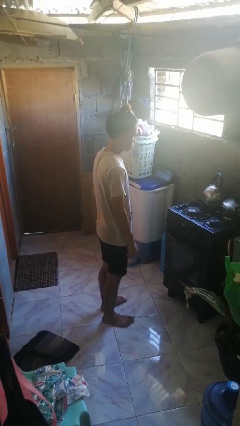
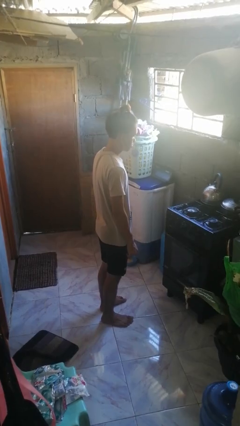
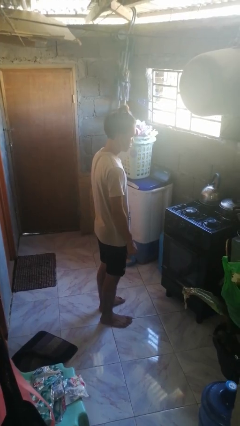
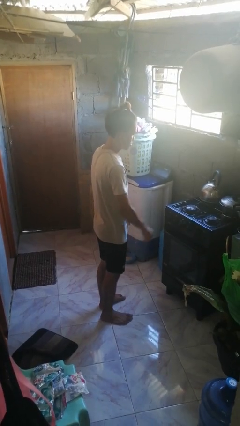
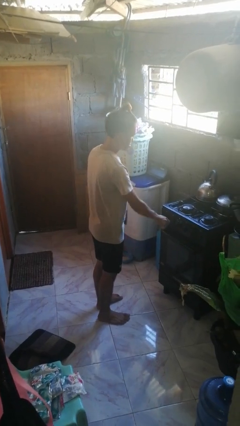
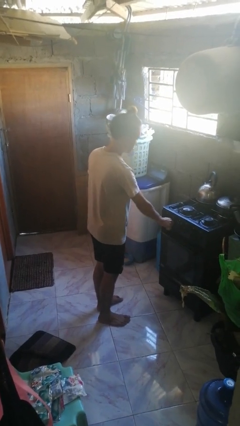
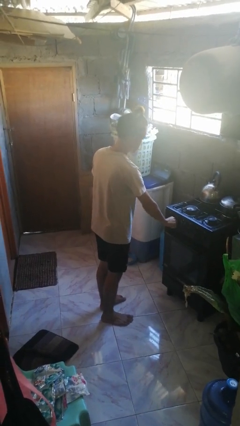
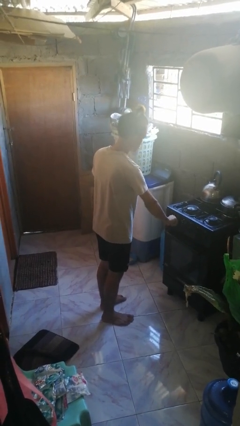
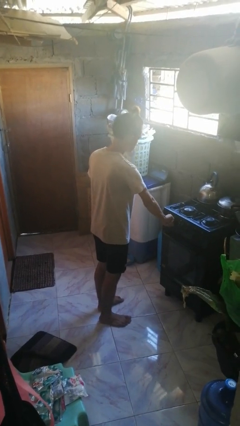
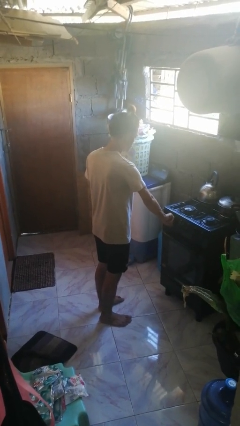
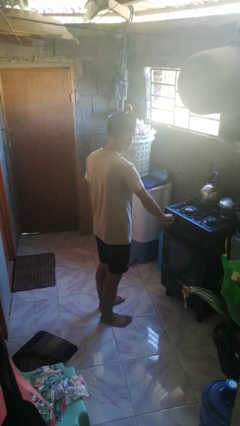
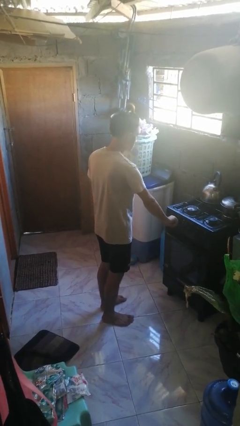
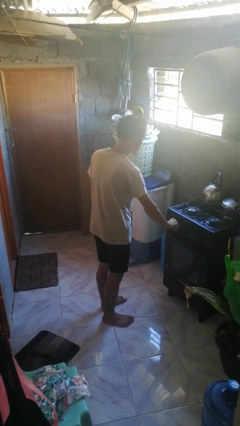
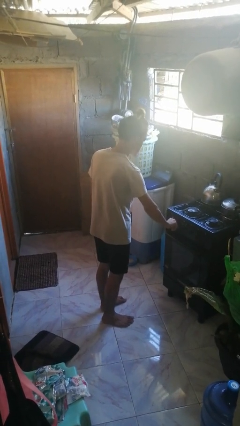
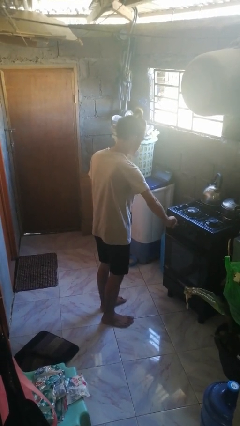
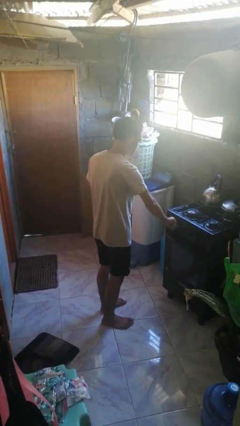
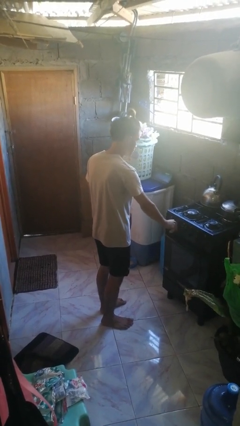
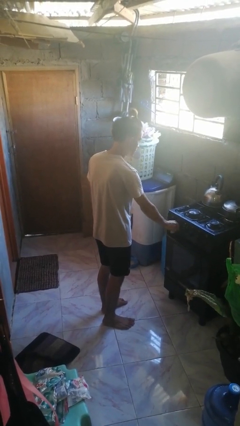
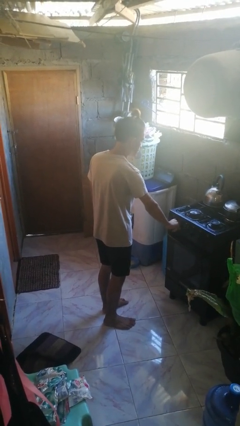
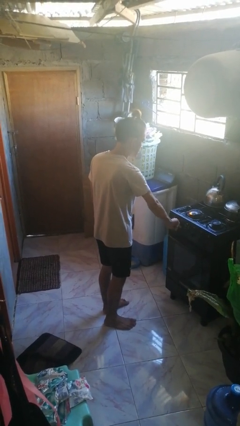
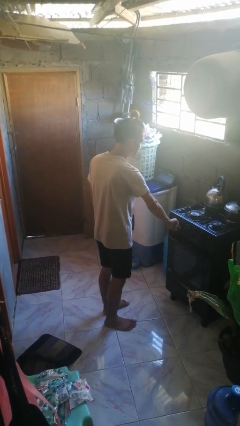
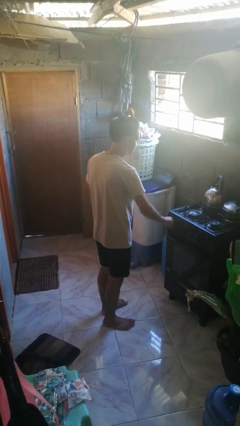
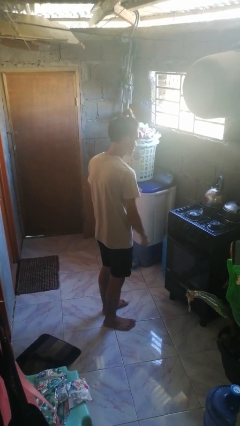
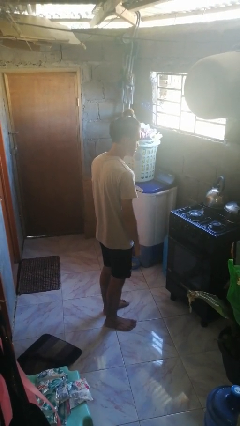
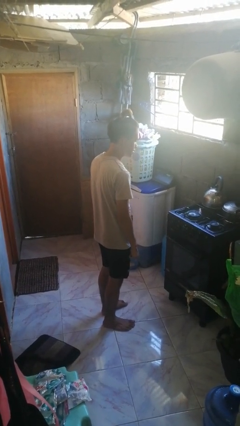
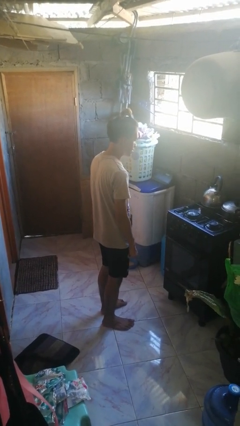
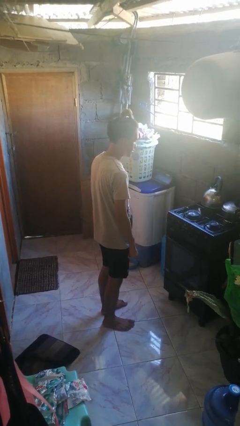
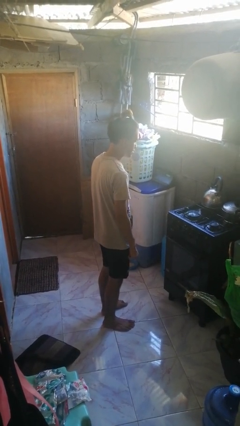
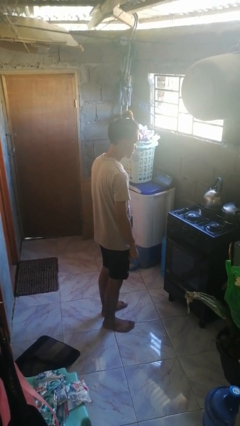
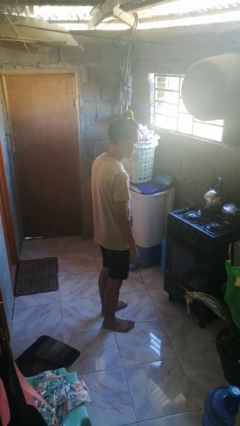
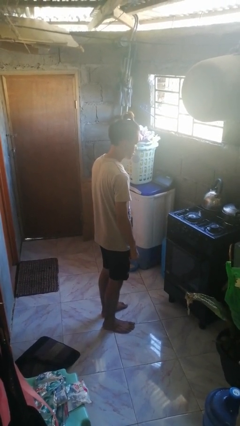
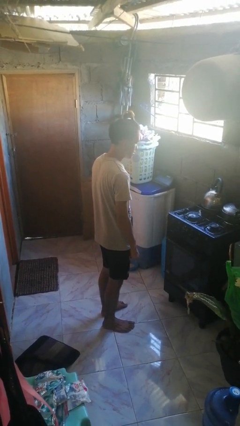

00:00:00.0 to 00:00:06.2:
person turns on stovetop

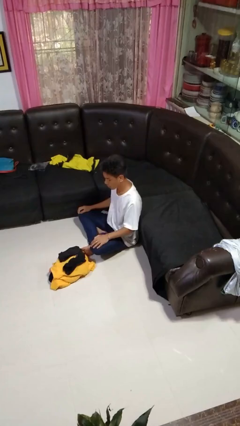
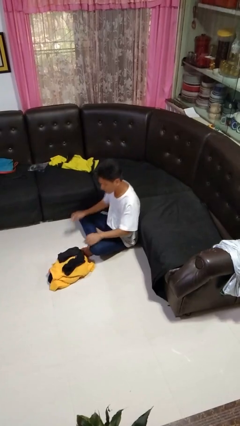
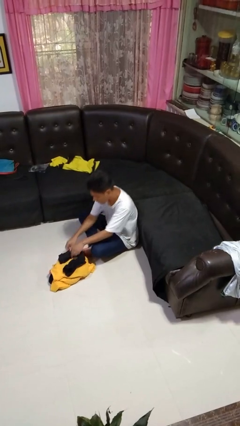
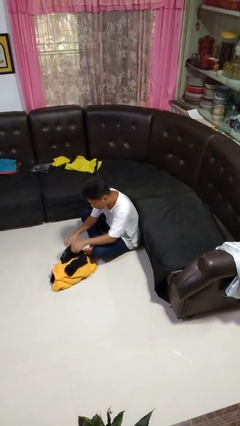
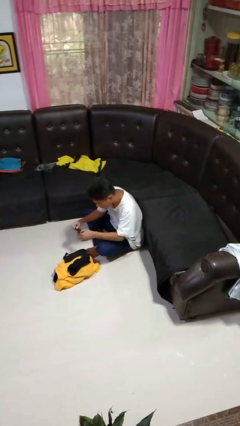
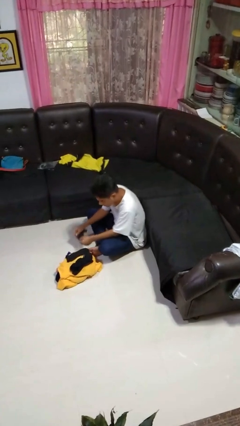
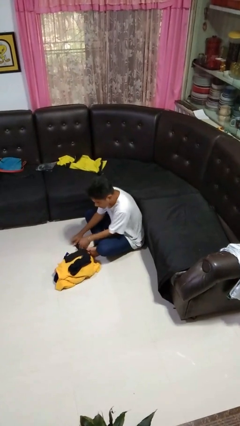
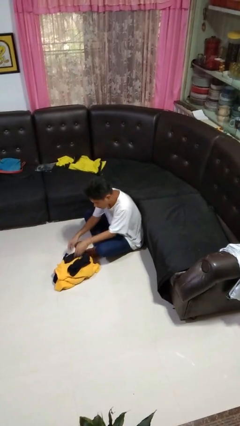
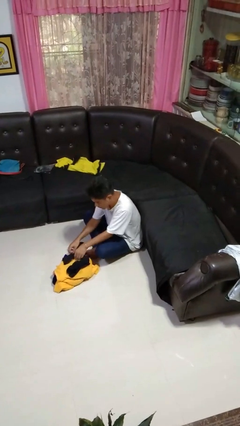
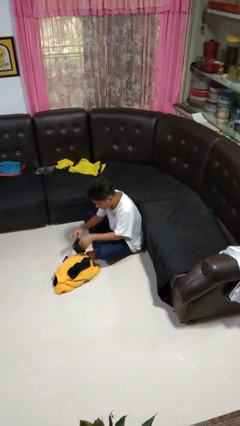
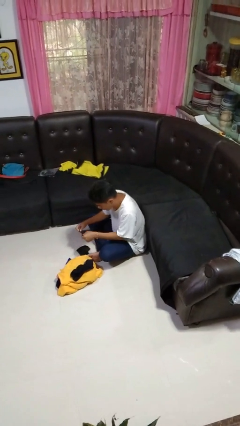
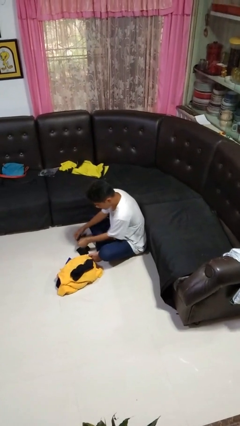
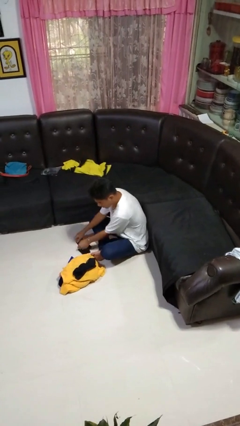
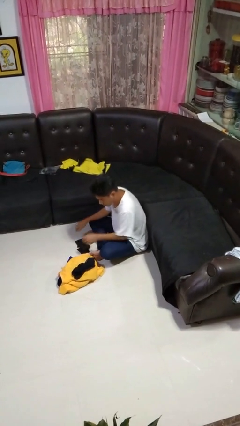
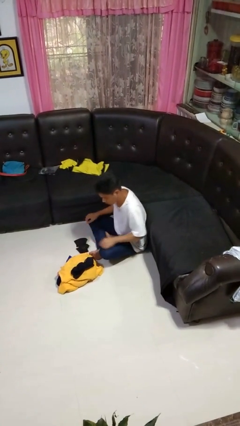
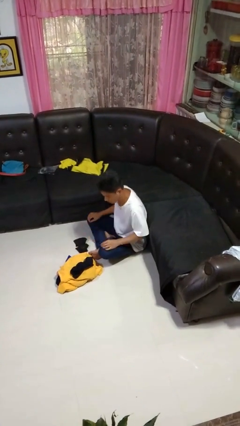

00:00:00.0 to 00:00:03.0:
person folds socks

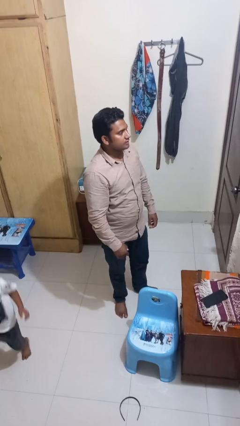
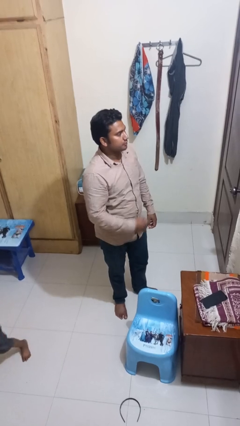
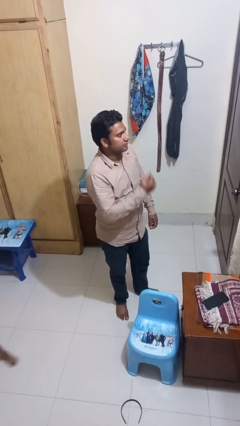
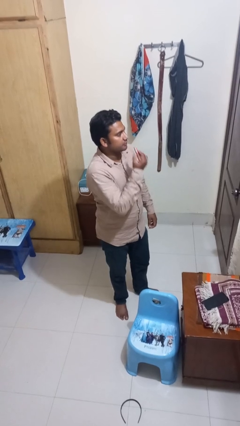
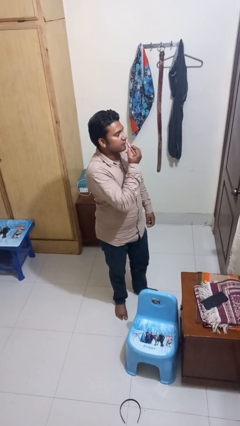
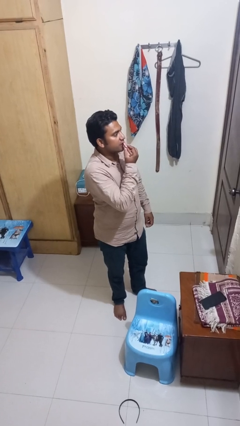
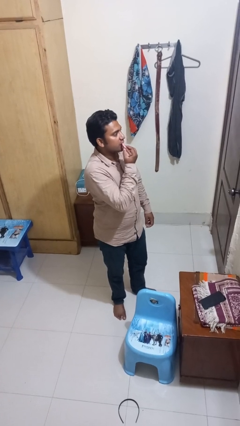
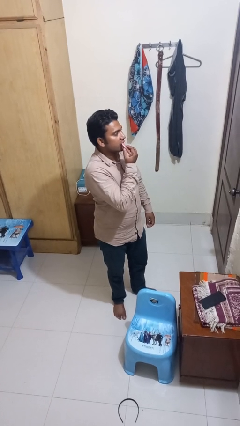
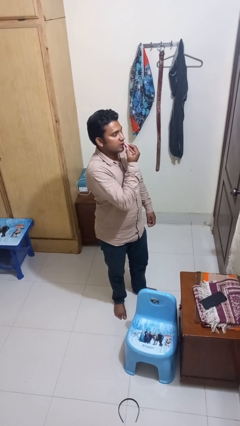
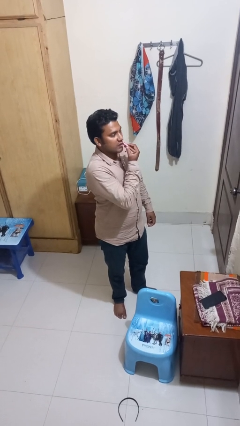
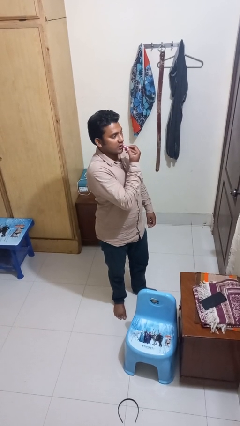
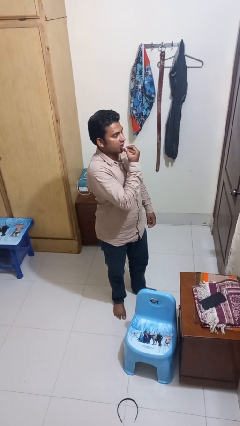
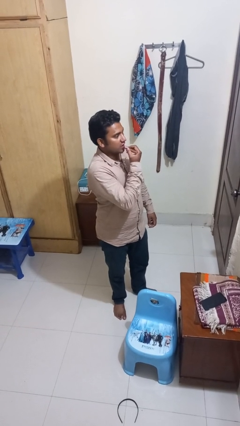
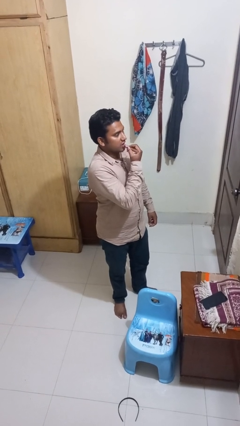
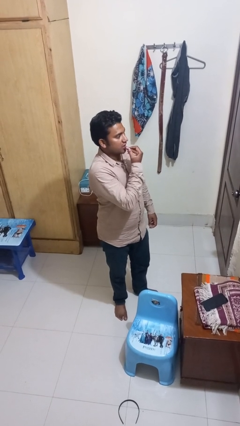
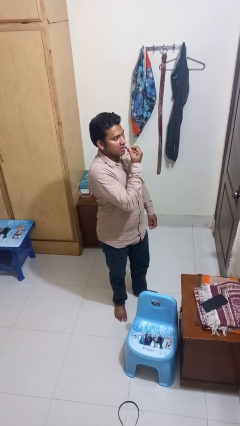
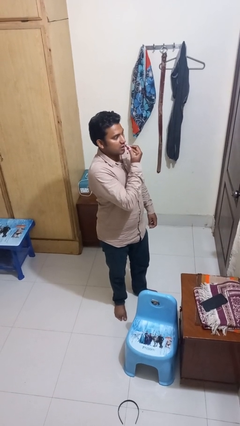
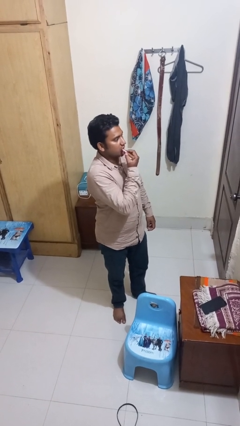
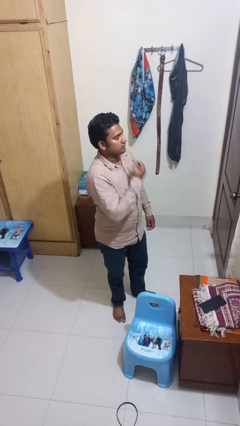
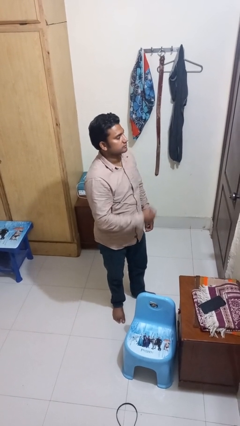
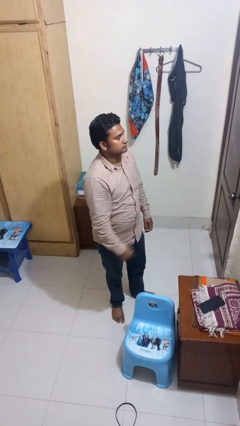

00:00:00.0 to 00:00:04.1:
person applies lip makeup

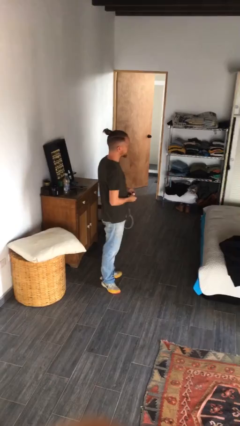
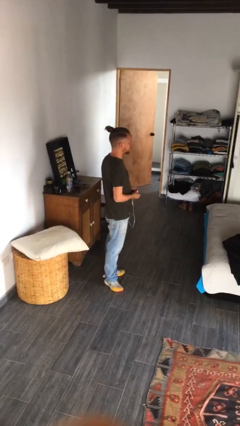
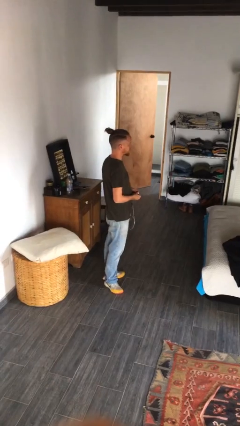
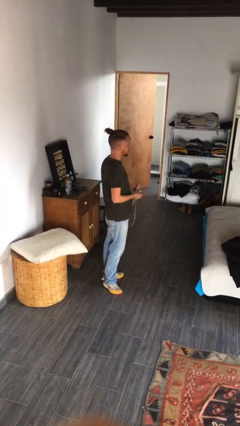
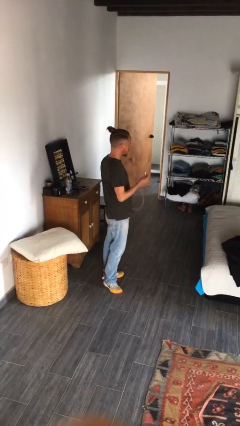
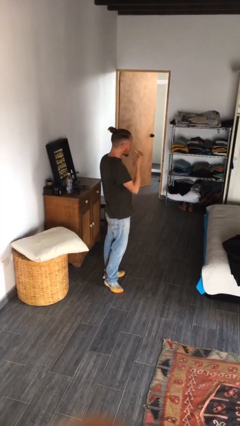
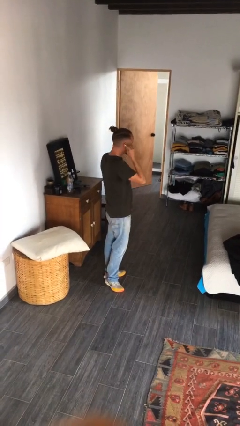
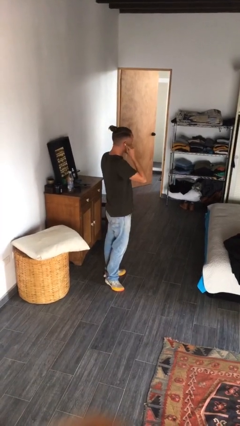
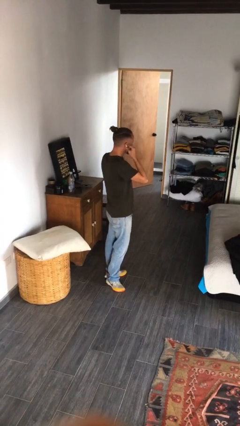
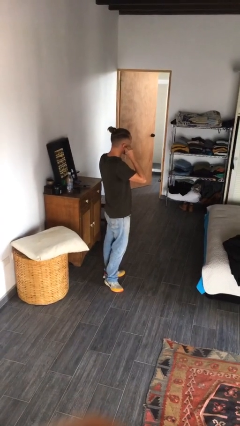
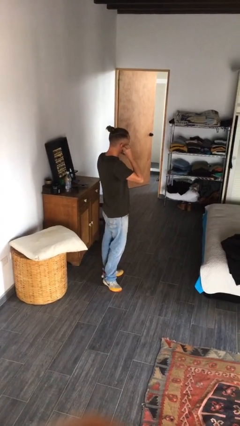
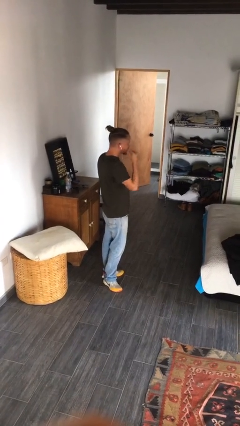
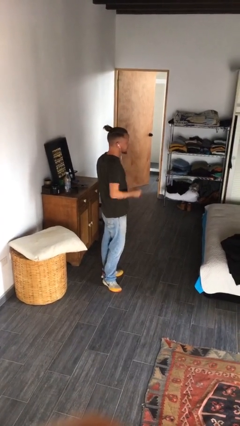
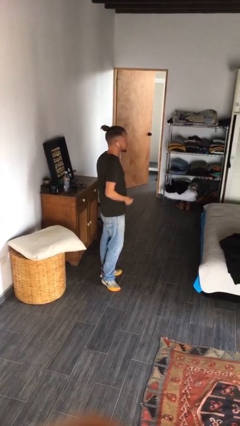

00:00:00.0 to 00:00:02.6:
person puts on headphones

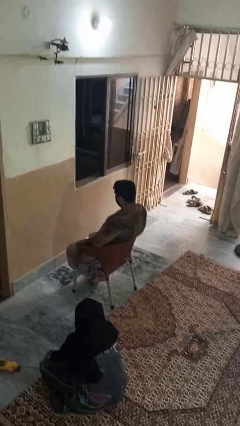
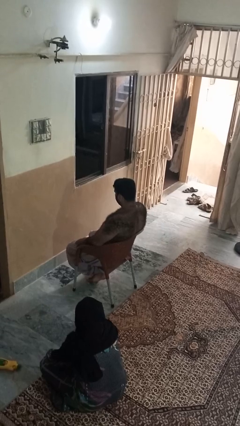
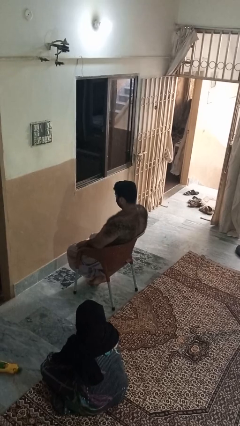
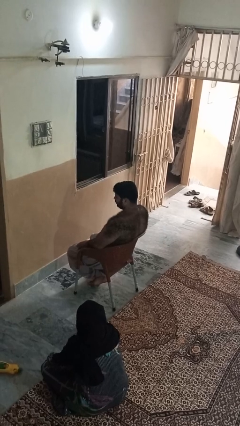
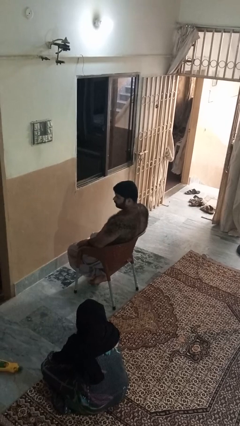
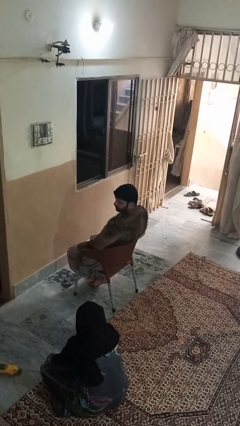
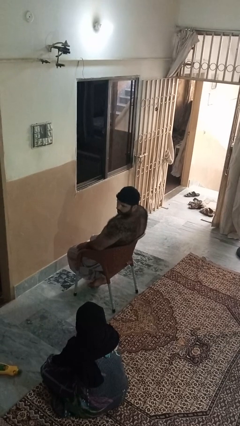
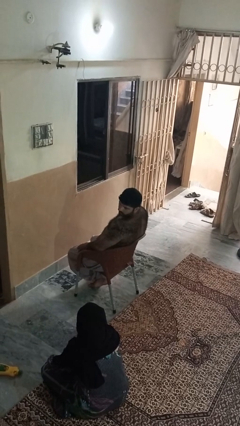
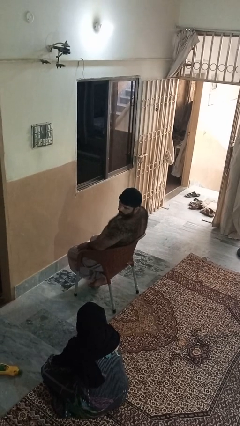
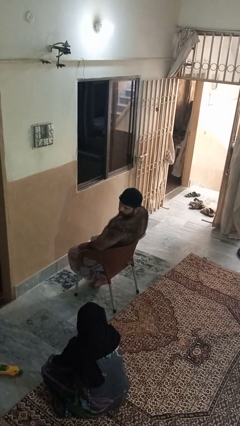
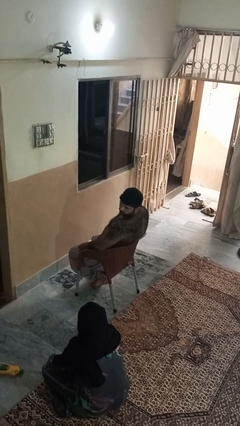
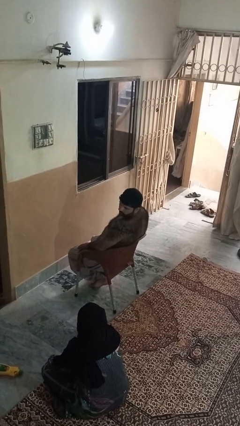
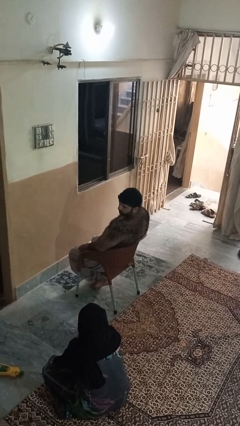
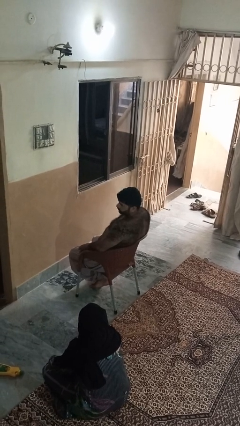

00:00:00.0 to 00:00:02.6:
person looks over shoulder
